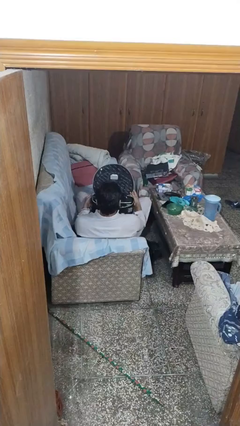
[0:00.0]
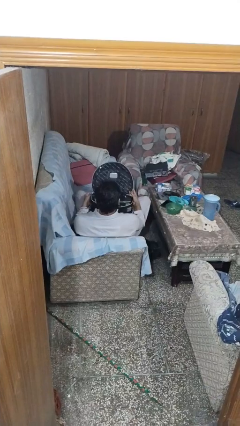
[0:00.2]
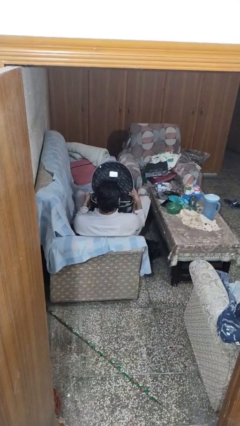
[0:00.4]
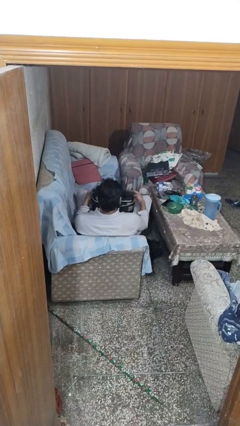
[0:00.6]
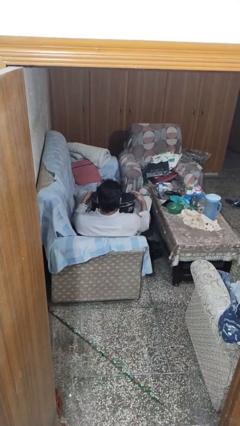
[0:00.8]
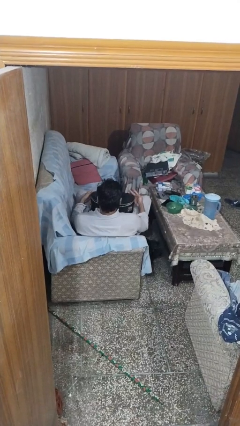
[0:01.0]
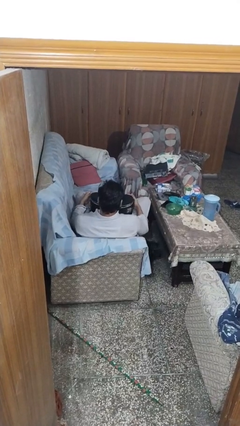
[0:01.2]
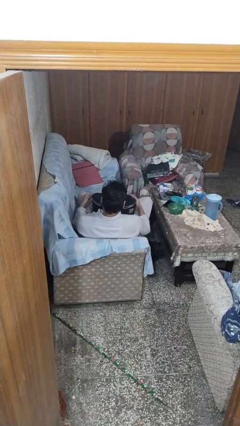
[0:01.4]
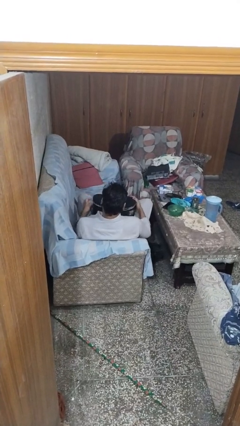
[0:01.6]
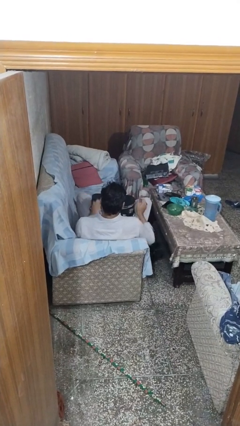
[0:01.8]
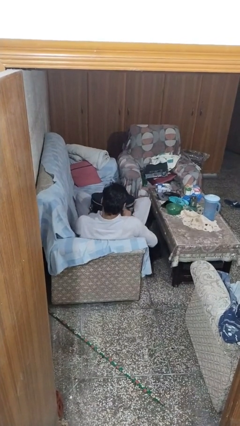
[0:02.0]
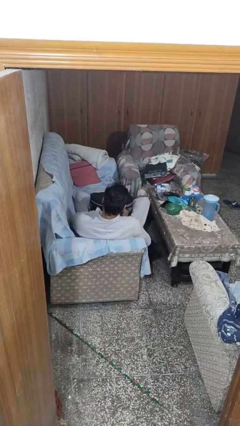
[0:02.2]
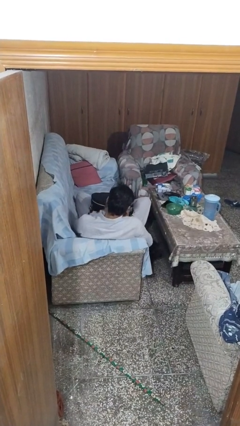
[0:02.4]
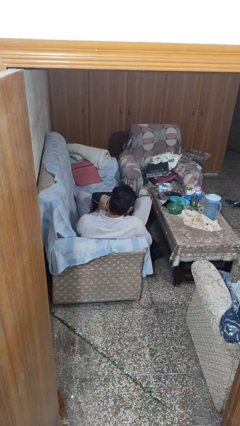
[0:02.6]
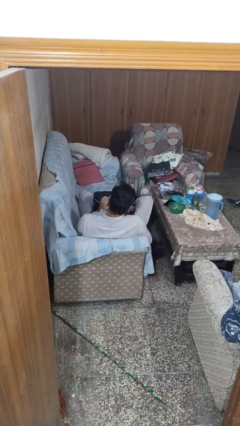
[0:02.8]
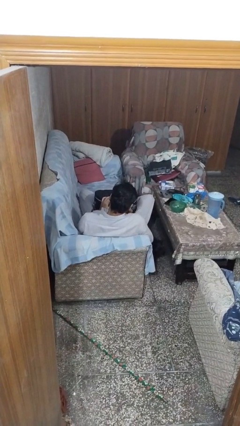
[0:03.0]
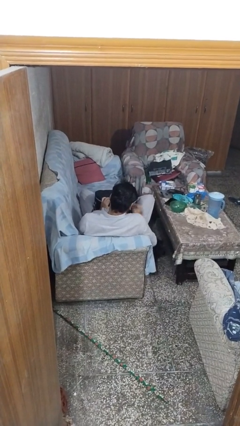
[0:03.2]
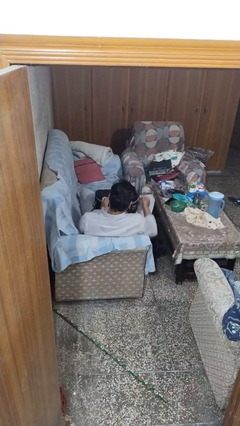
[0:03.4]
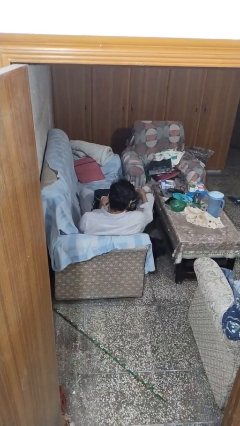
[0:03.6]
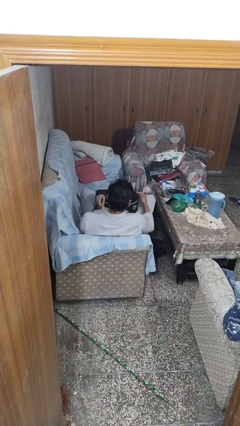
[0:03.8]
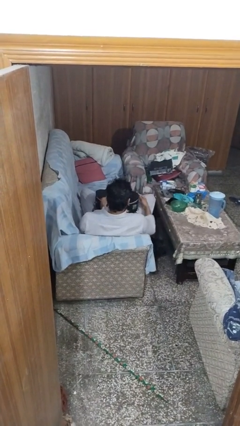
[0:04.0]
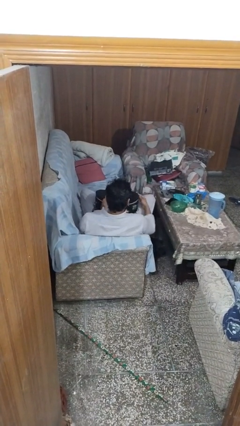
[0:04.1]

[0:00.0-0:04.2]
person closes suitcase

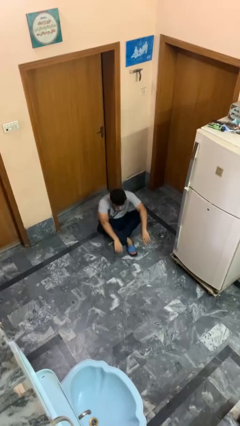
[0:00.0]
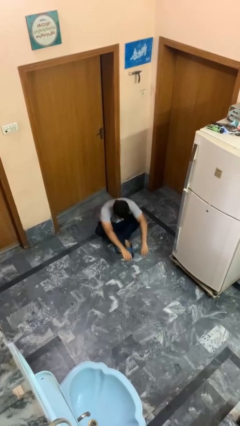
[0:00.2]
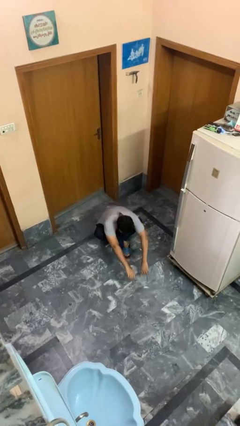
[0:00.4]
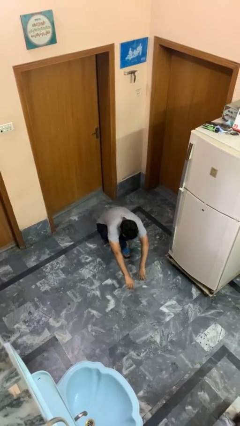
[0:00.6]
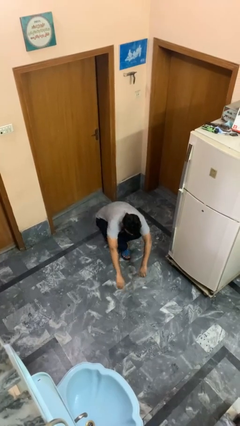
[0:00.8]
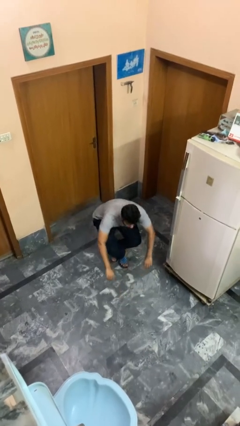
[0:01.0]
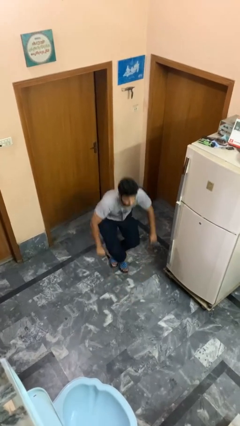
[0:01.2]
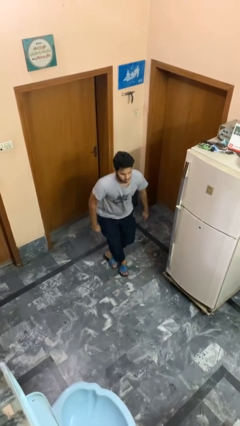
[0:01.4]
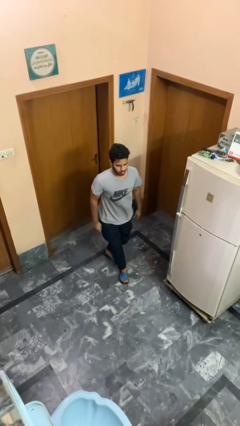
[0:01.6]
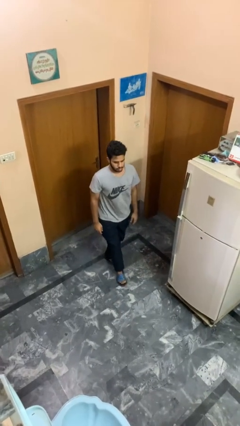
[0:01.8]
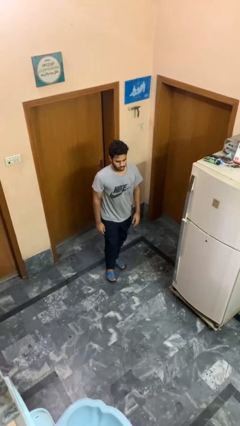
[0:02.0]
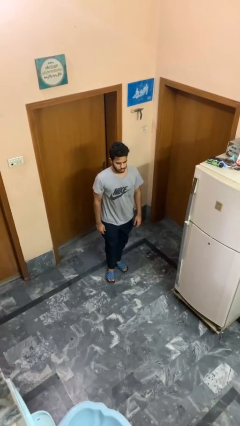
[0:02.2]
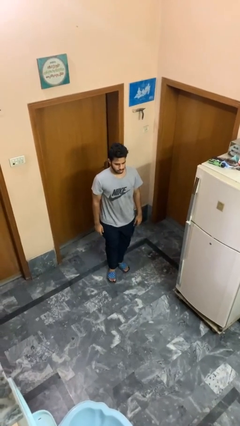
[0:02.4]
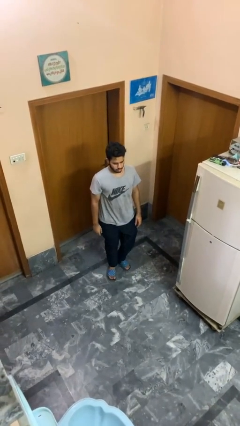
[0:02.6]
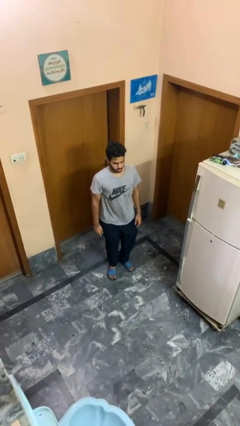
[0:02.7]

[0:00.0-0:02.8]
person stands up from floor

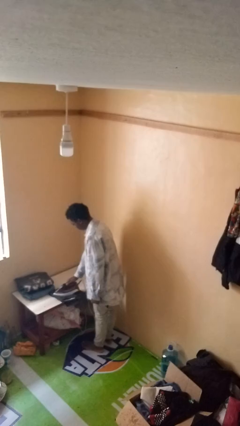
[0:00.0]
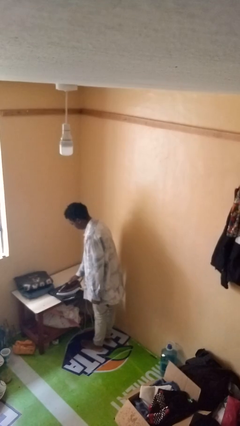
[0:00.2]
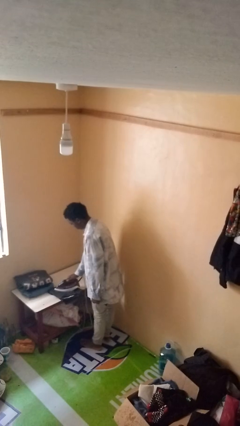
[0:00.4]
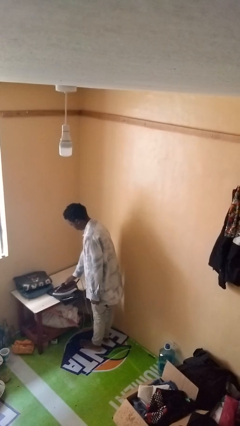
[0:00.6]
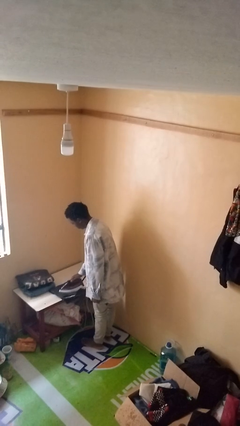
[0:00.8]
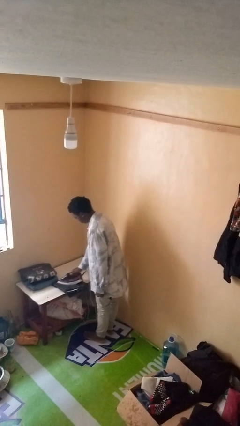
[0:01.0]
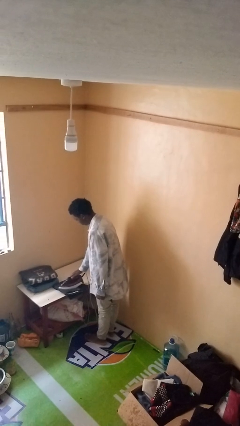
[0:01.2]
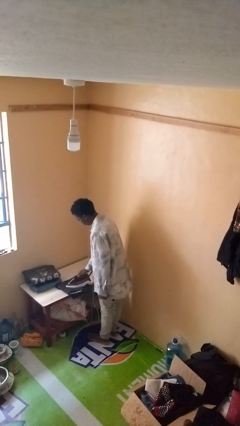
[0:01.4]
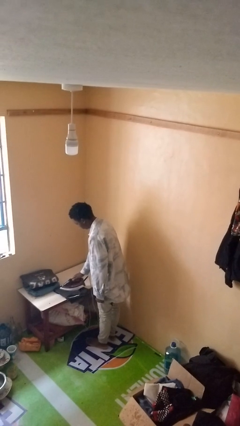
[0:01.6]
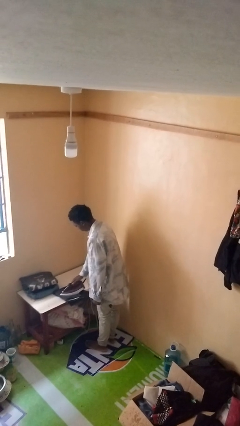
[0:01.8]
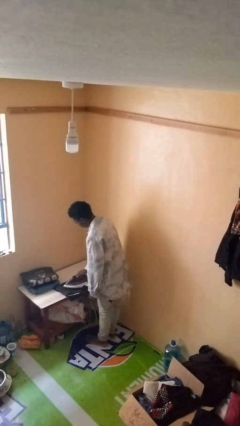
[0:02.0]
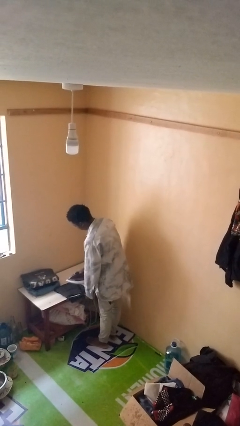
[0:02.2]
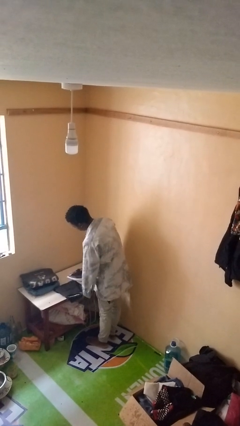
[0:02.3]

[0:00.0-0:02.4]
person irons clothes

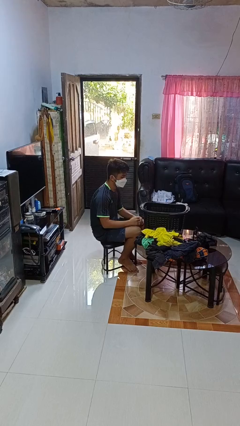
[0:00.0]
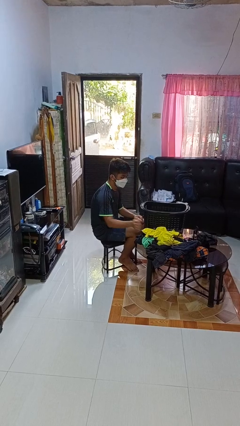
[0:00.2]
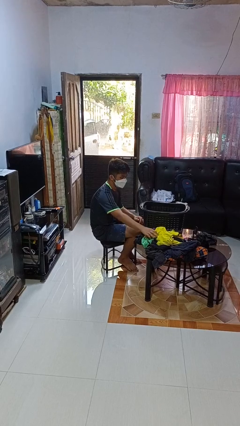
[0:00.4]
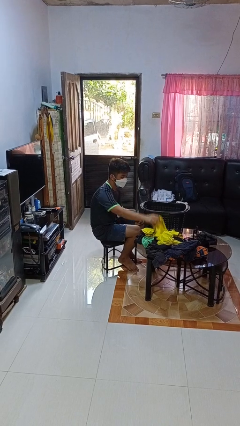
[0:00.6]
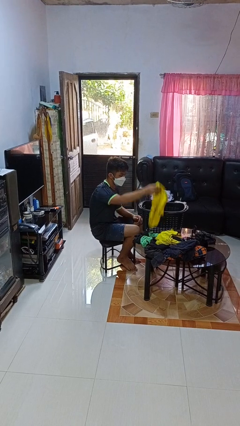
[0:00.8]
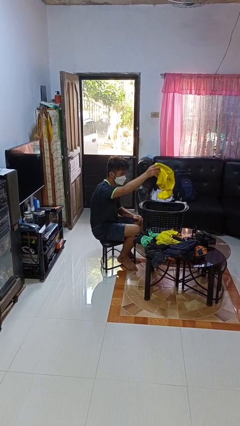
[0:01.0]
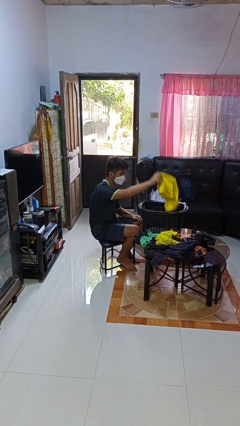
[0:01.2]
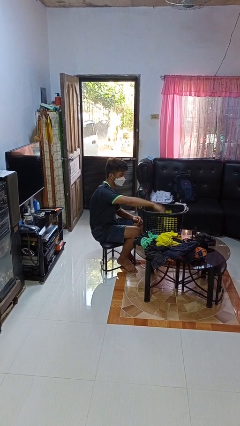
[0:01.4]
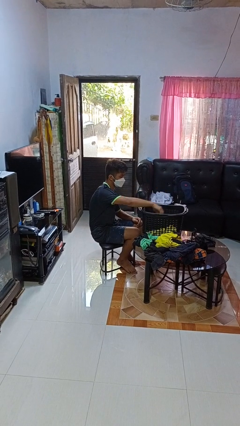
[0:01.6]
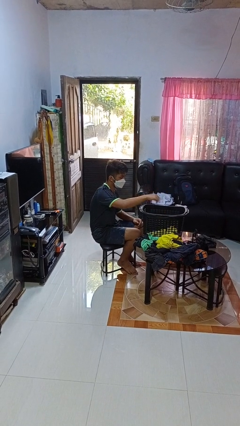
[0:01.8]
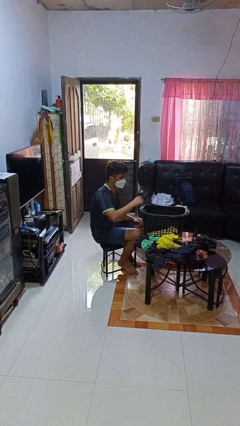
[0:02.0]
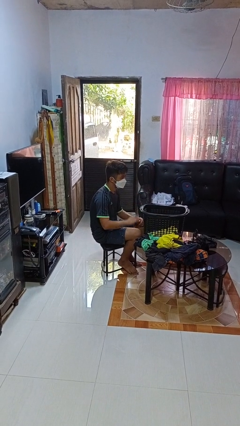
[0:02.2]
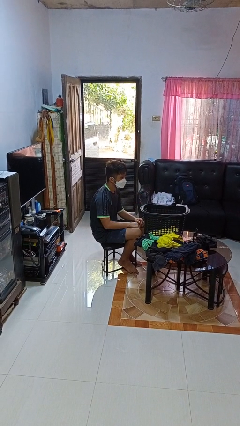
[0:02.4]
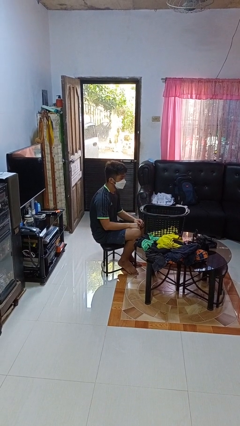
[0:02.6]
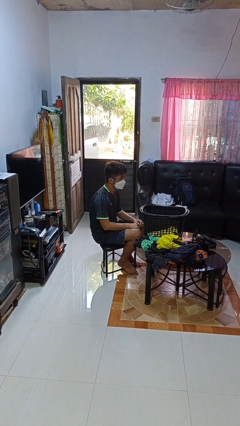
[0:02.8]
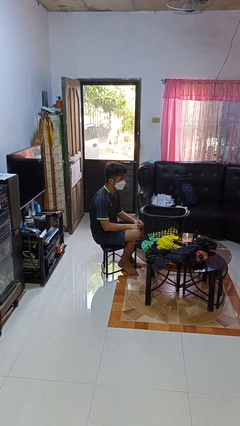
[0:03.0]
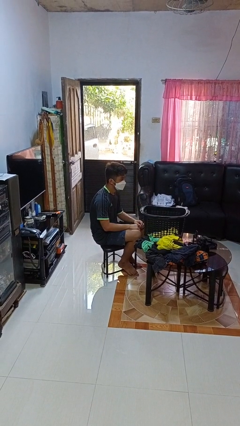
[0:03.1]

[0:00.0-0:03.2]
person puts object into basket

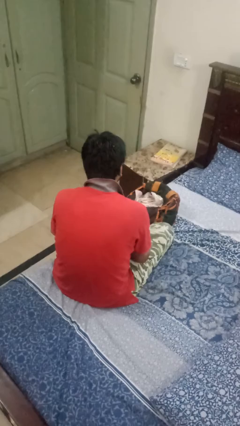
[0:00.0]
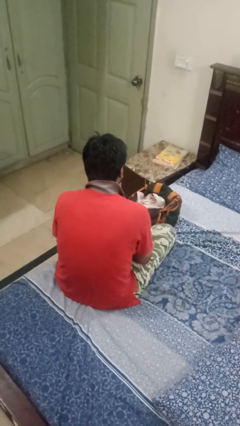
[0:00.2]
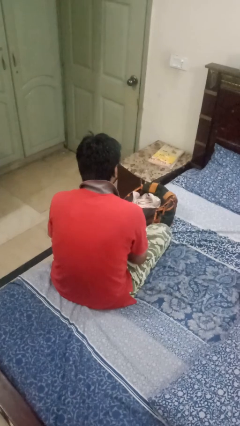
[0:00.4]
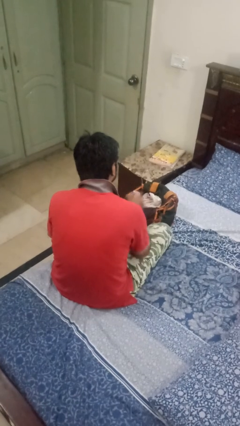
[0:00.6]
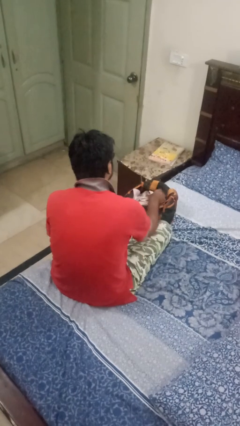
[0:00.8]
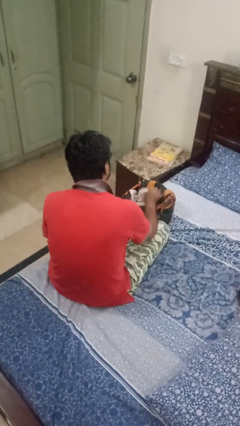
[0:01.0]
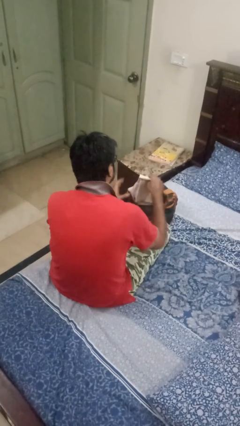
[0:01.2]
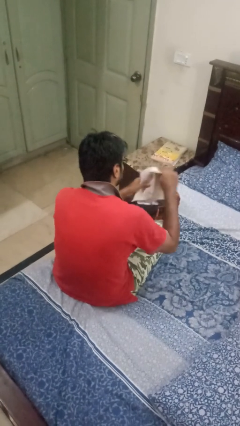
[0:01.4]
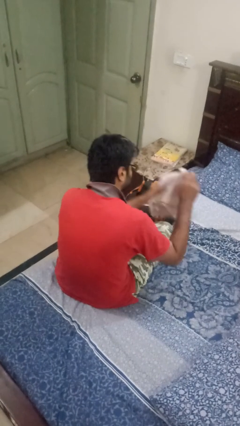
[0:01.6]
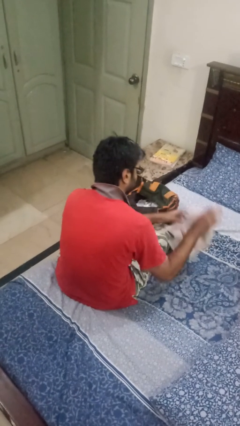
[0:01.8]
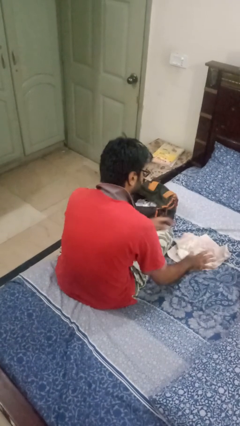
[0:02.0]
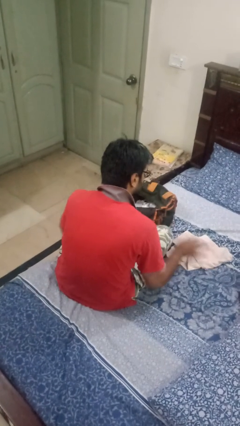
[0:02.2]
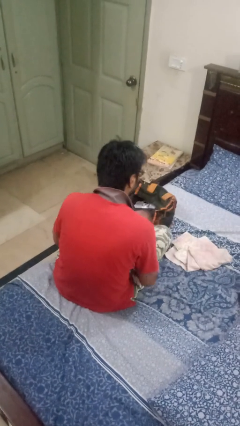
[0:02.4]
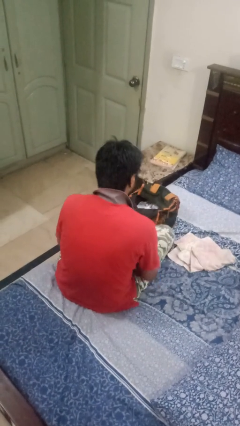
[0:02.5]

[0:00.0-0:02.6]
person takes object from bag

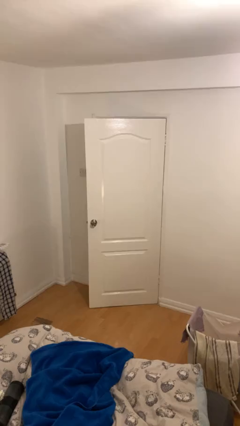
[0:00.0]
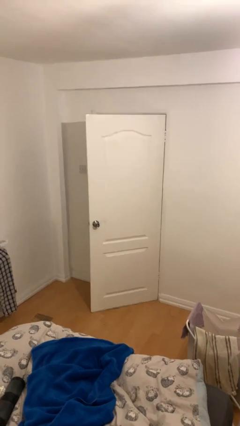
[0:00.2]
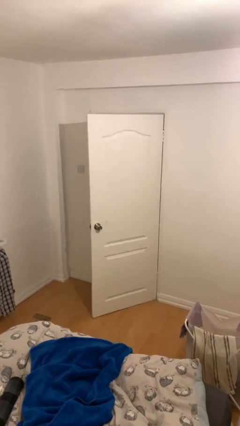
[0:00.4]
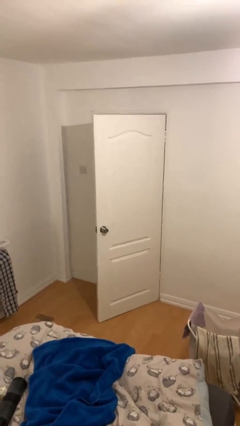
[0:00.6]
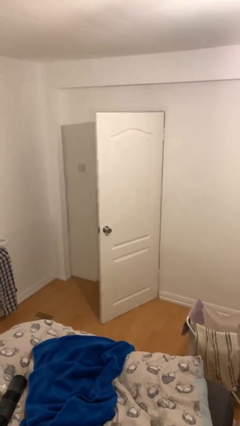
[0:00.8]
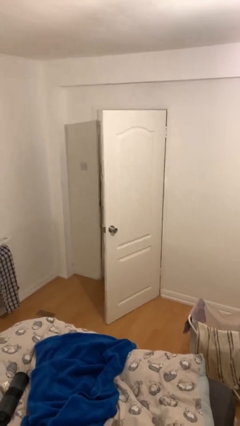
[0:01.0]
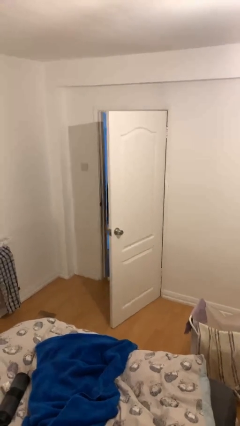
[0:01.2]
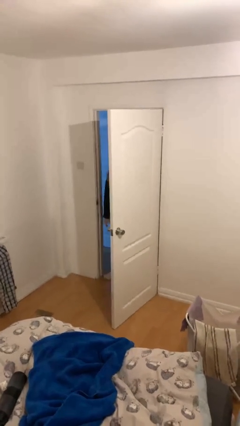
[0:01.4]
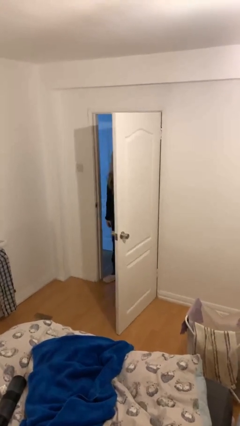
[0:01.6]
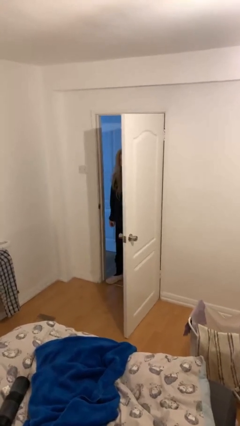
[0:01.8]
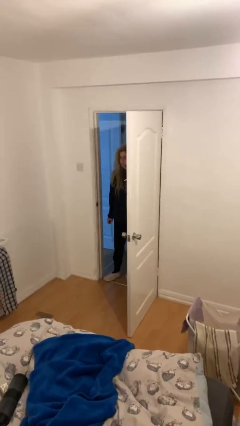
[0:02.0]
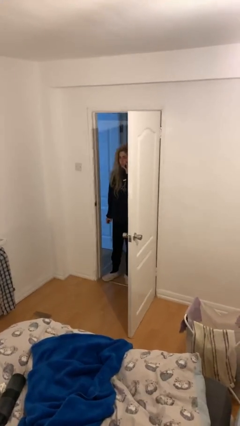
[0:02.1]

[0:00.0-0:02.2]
person opens facility door
